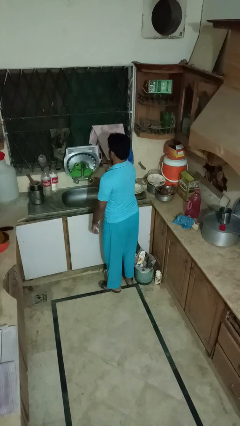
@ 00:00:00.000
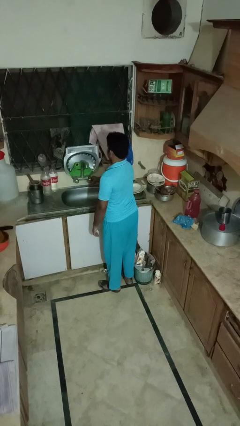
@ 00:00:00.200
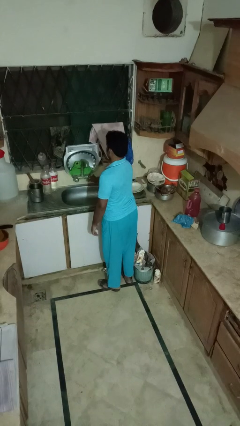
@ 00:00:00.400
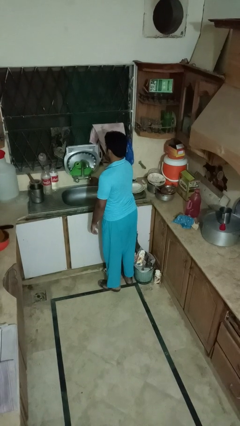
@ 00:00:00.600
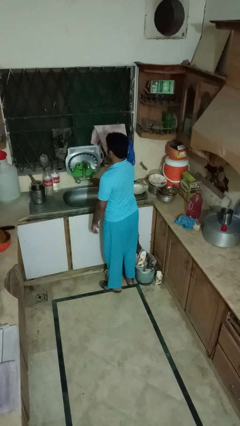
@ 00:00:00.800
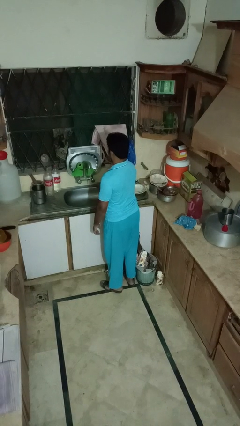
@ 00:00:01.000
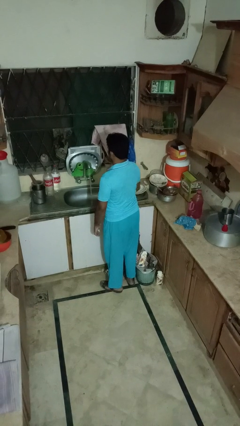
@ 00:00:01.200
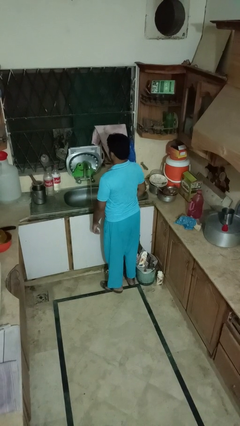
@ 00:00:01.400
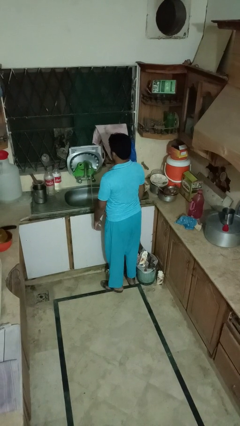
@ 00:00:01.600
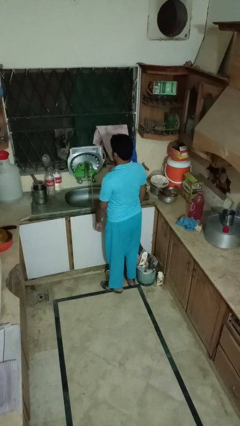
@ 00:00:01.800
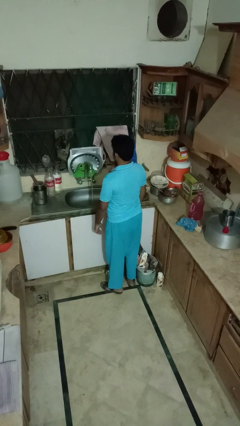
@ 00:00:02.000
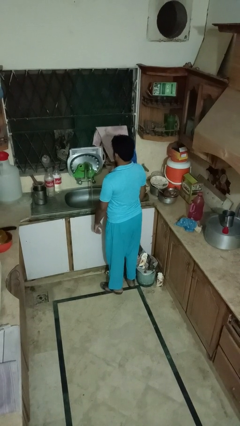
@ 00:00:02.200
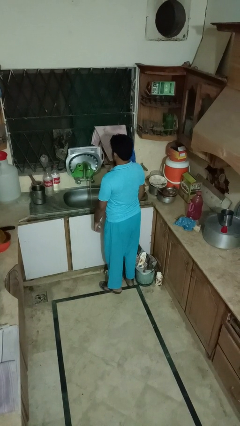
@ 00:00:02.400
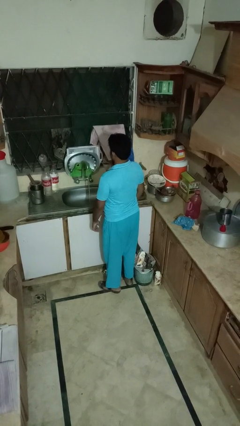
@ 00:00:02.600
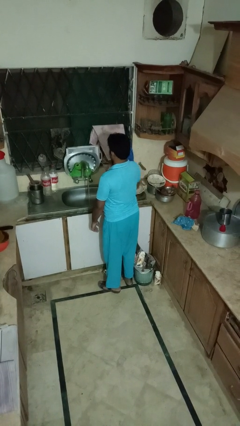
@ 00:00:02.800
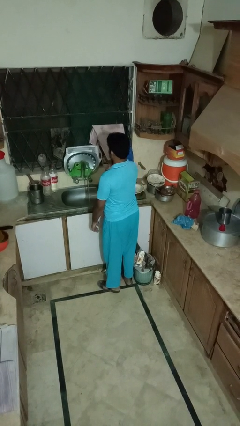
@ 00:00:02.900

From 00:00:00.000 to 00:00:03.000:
person turns on faucet

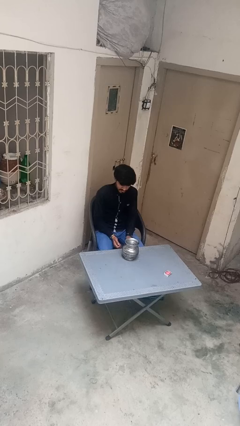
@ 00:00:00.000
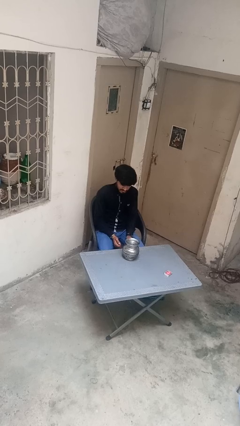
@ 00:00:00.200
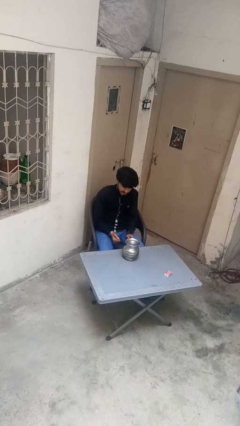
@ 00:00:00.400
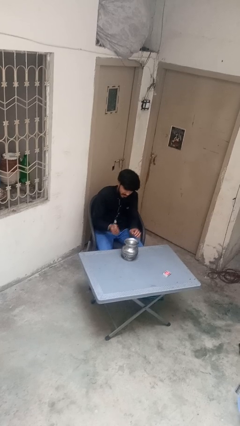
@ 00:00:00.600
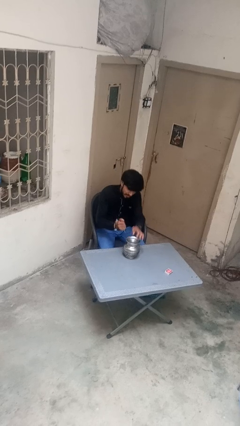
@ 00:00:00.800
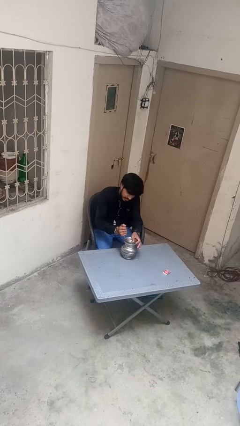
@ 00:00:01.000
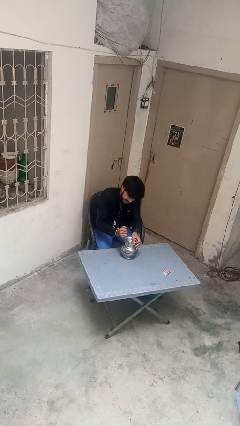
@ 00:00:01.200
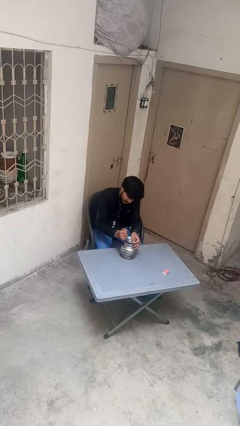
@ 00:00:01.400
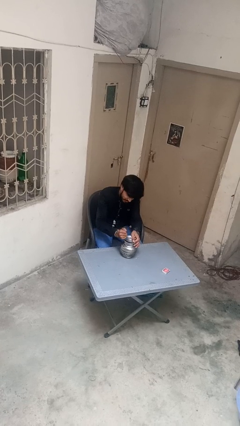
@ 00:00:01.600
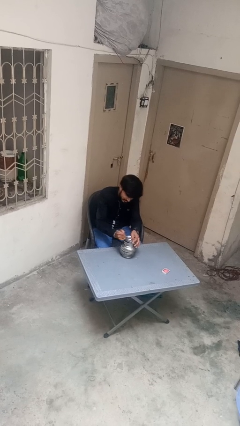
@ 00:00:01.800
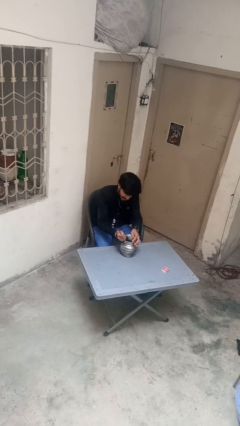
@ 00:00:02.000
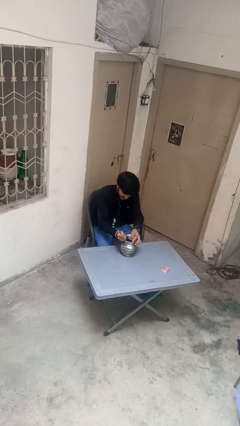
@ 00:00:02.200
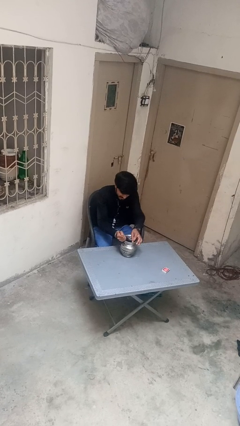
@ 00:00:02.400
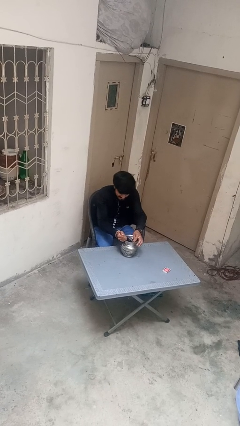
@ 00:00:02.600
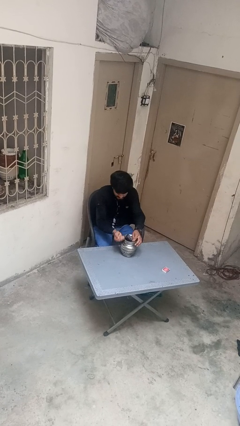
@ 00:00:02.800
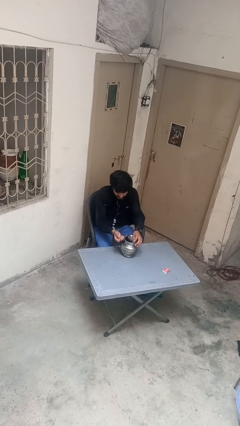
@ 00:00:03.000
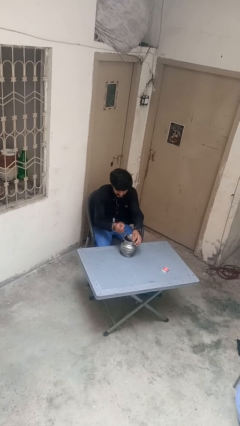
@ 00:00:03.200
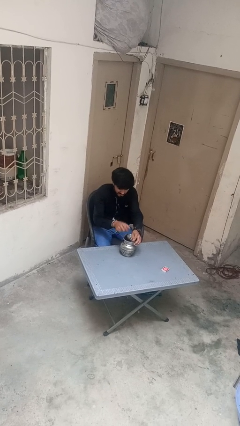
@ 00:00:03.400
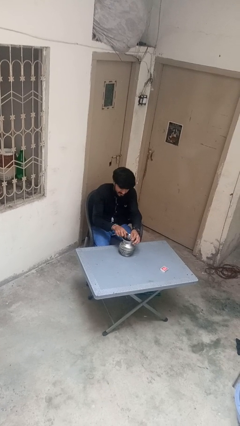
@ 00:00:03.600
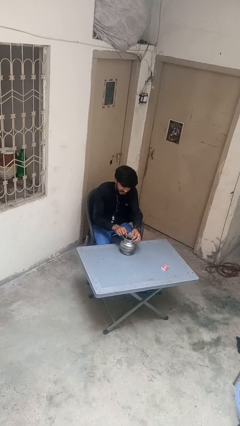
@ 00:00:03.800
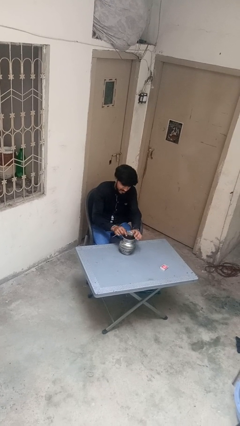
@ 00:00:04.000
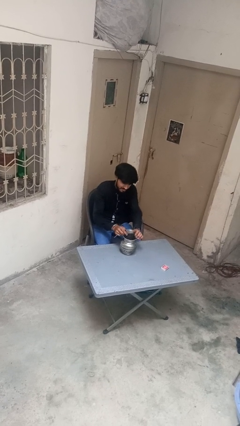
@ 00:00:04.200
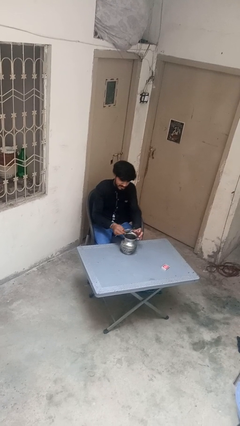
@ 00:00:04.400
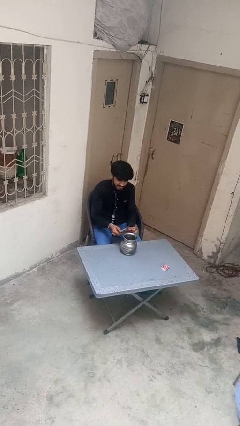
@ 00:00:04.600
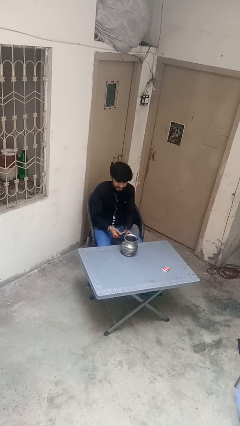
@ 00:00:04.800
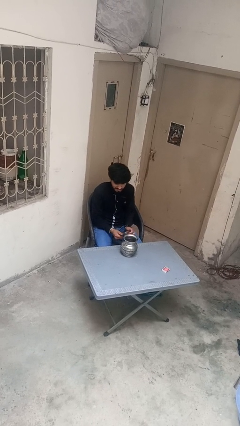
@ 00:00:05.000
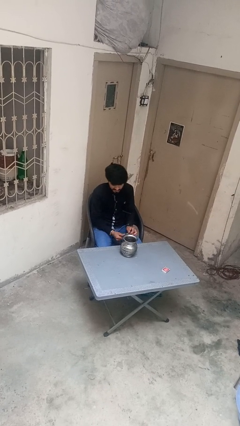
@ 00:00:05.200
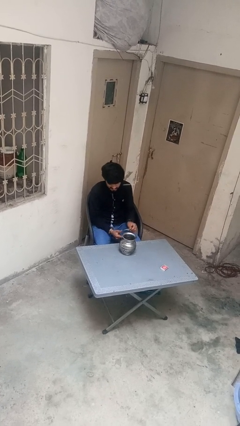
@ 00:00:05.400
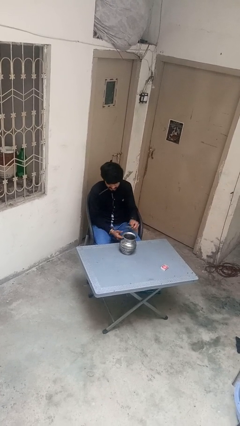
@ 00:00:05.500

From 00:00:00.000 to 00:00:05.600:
person opens can with can opener

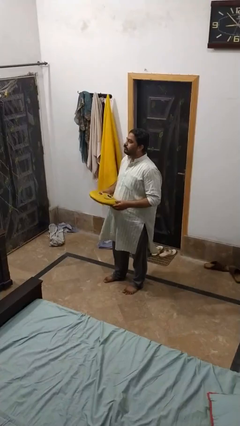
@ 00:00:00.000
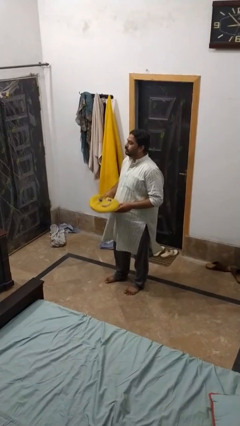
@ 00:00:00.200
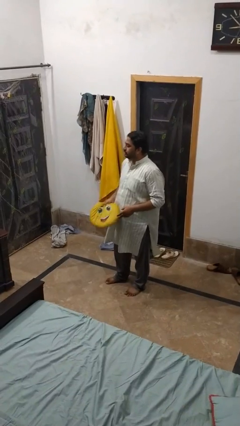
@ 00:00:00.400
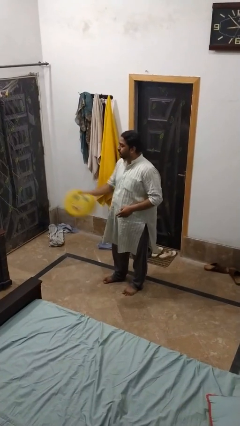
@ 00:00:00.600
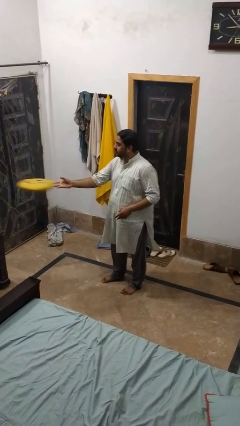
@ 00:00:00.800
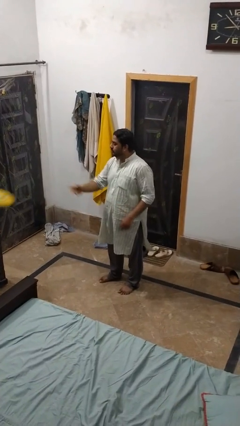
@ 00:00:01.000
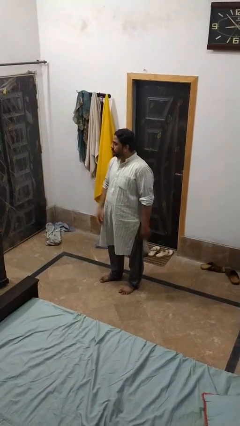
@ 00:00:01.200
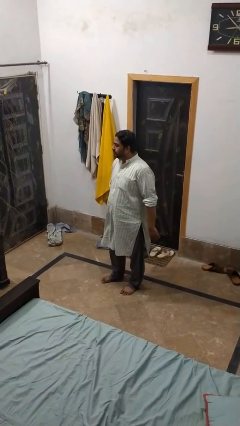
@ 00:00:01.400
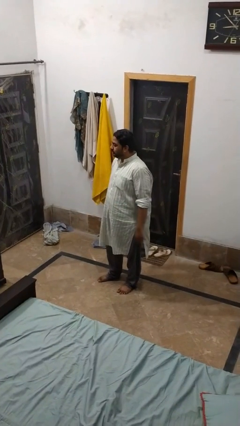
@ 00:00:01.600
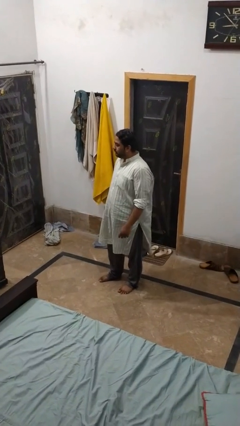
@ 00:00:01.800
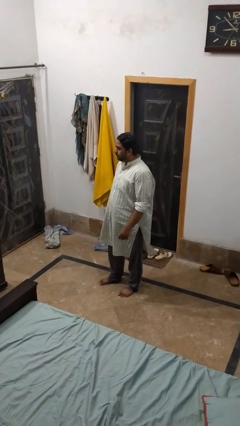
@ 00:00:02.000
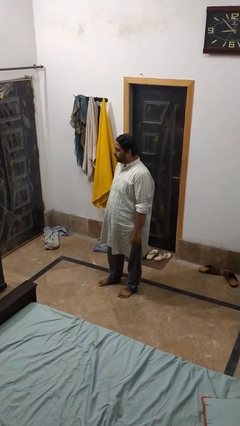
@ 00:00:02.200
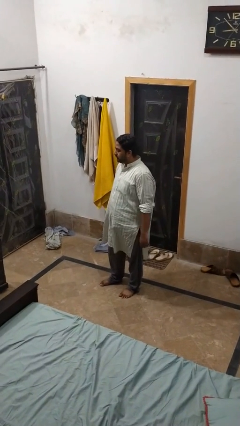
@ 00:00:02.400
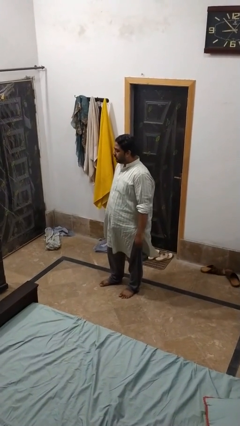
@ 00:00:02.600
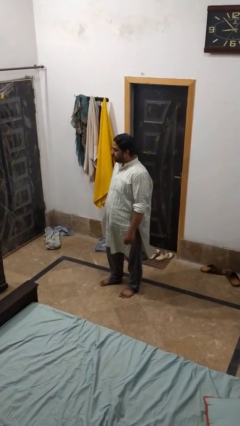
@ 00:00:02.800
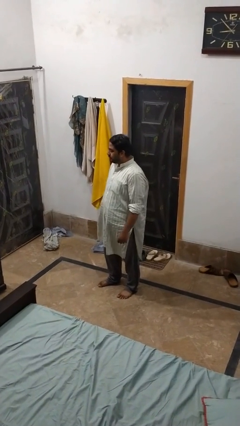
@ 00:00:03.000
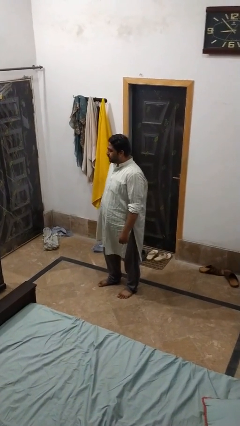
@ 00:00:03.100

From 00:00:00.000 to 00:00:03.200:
person throws object on table

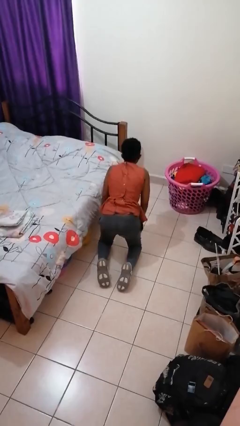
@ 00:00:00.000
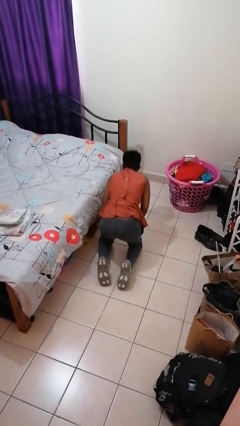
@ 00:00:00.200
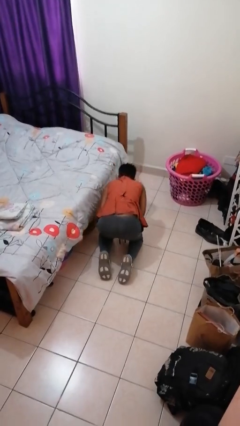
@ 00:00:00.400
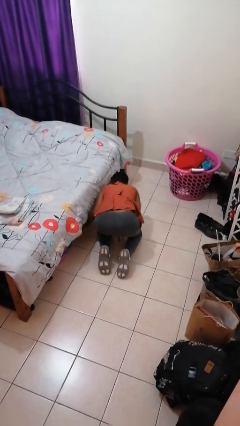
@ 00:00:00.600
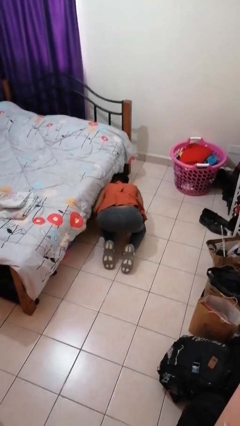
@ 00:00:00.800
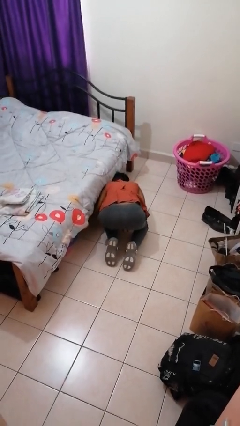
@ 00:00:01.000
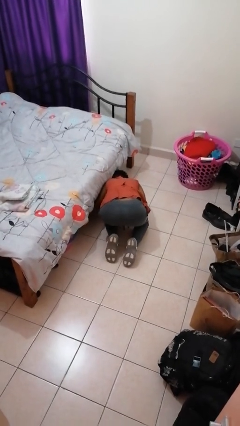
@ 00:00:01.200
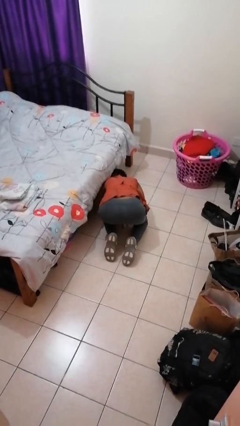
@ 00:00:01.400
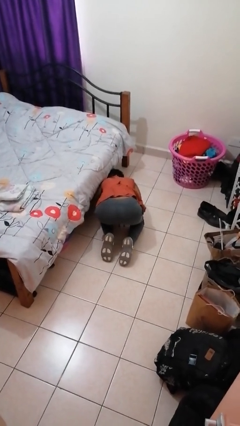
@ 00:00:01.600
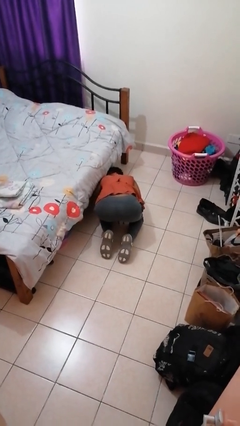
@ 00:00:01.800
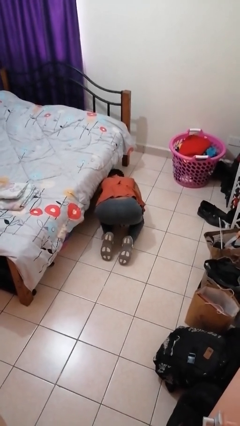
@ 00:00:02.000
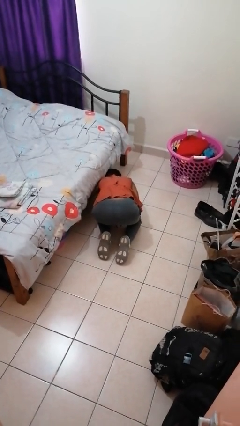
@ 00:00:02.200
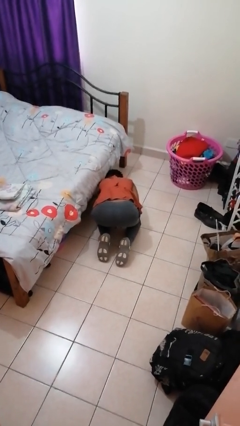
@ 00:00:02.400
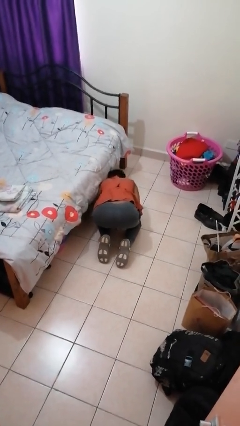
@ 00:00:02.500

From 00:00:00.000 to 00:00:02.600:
person searches under bed

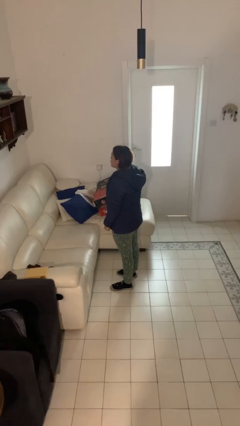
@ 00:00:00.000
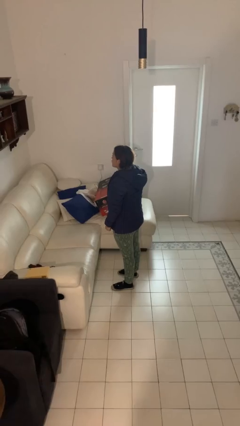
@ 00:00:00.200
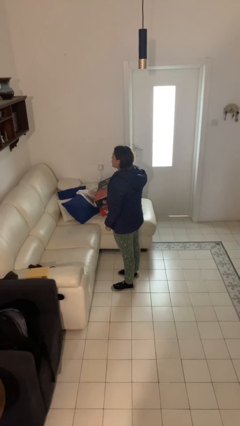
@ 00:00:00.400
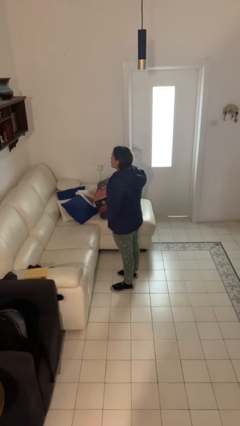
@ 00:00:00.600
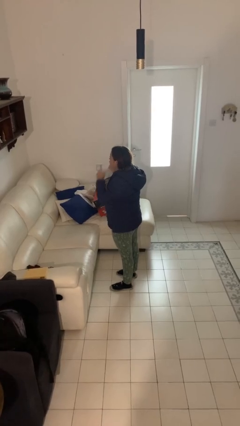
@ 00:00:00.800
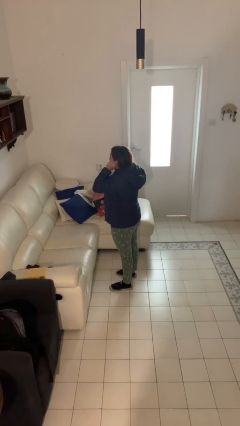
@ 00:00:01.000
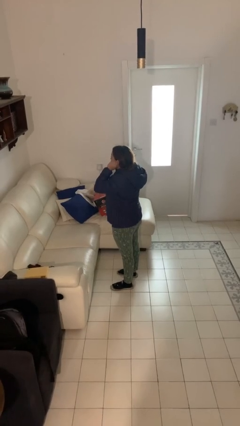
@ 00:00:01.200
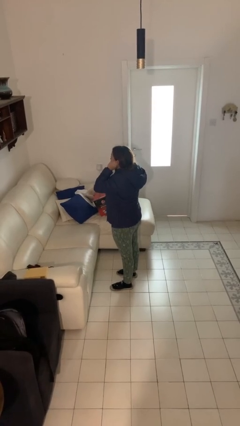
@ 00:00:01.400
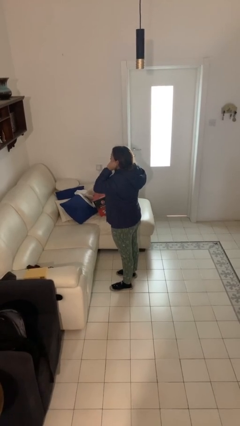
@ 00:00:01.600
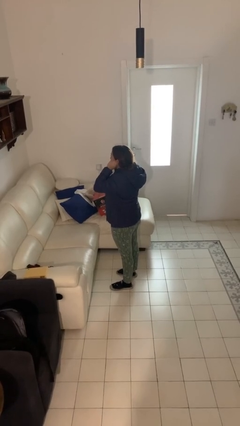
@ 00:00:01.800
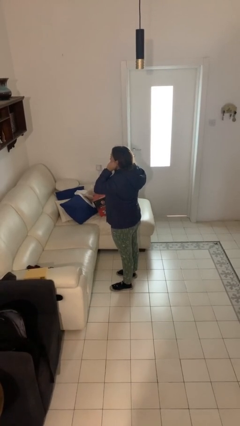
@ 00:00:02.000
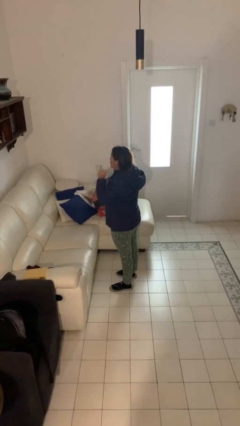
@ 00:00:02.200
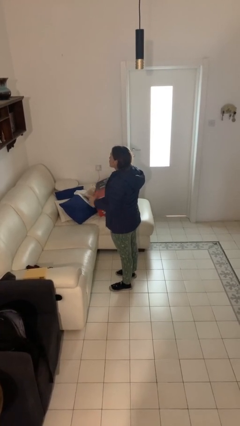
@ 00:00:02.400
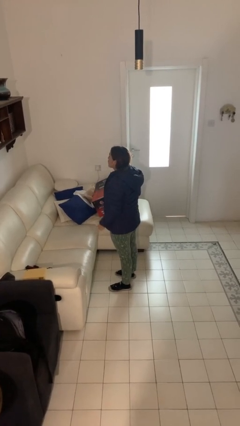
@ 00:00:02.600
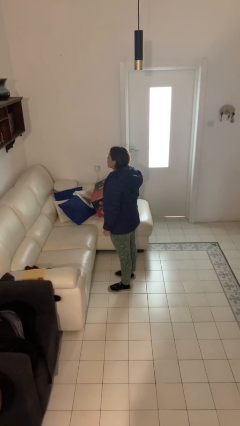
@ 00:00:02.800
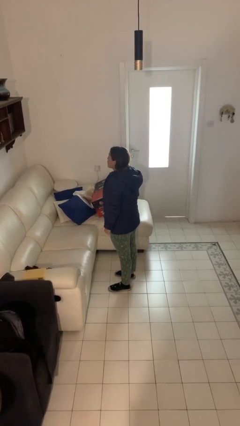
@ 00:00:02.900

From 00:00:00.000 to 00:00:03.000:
person touches earlobe
